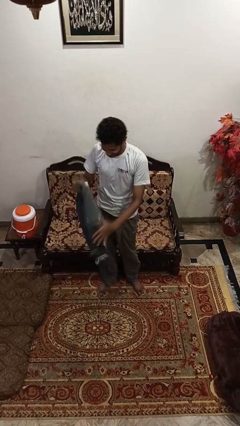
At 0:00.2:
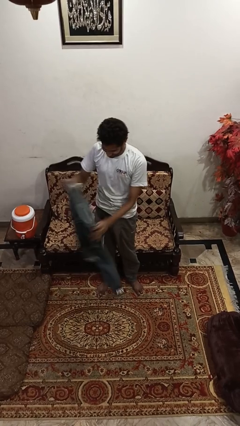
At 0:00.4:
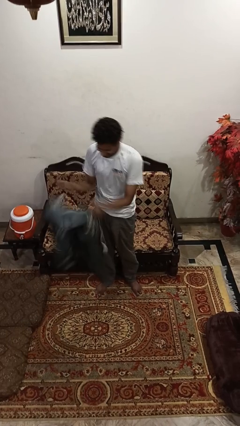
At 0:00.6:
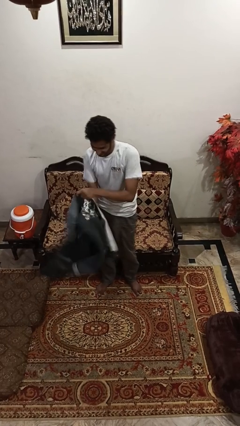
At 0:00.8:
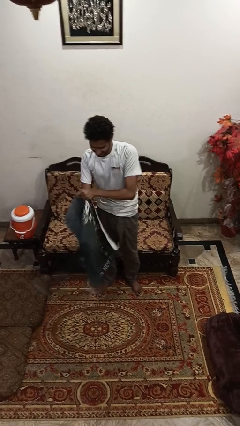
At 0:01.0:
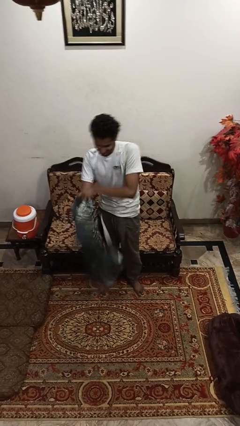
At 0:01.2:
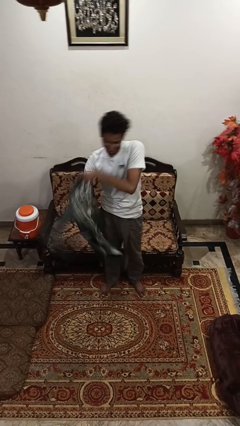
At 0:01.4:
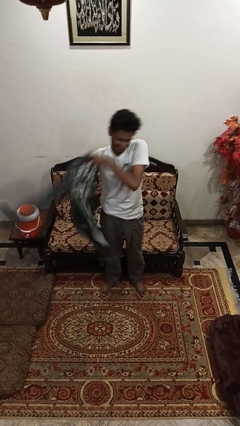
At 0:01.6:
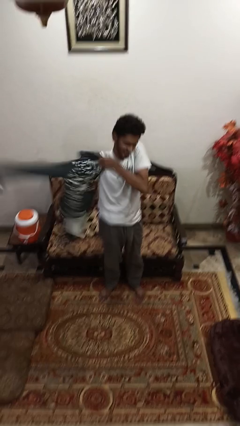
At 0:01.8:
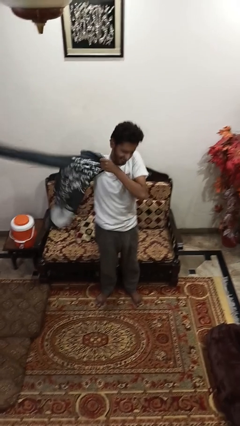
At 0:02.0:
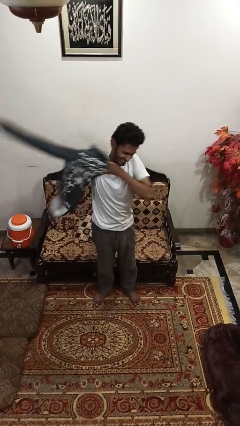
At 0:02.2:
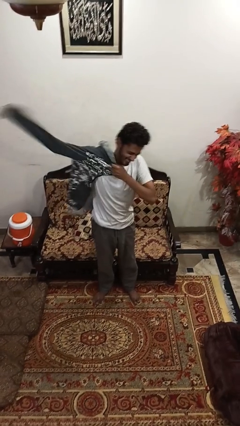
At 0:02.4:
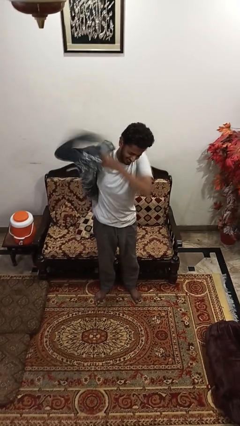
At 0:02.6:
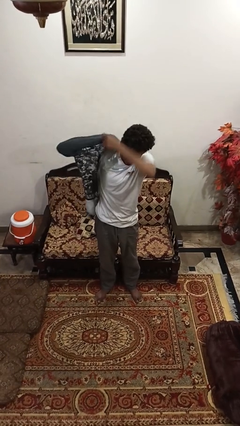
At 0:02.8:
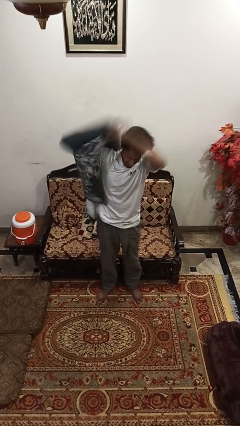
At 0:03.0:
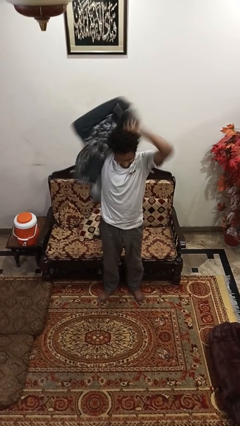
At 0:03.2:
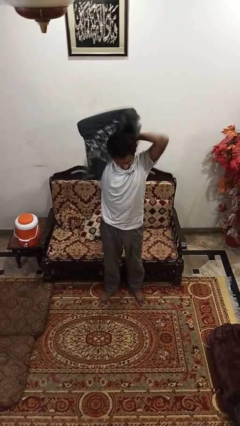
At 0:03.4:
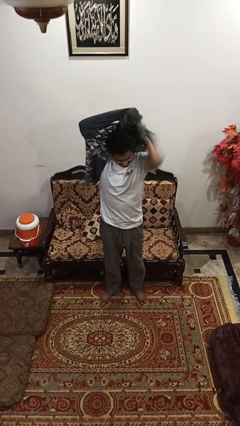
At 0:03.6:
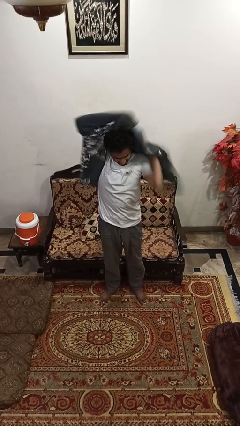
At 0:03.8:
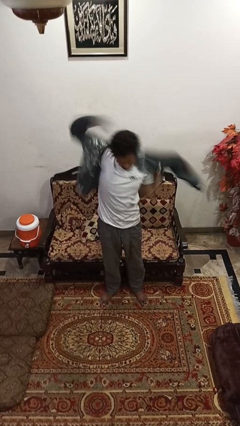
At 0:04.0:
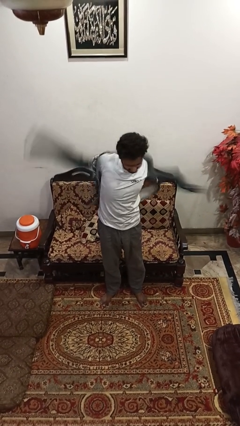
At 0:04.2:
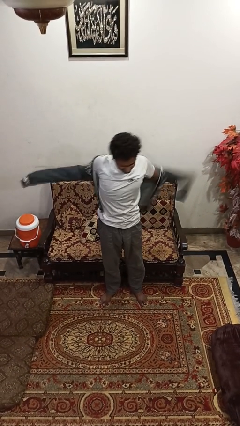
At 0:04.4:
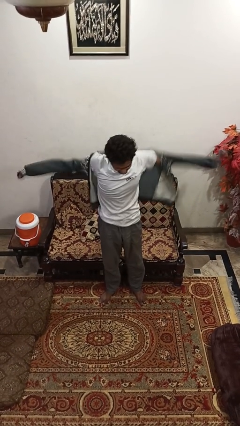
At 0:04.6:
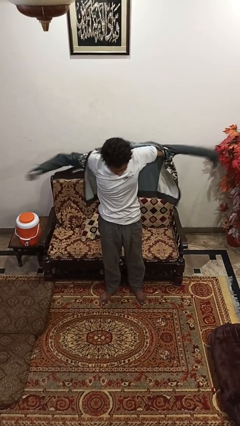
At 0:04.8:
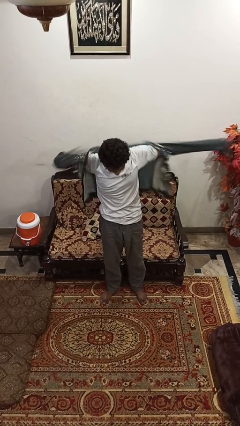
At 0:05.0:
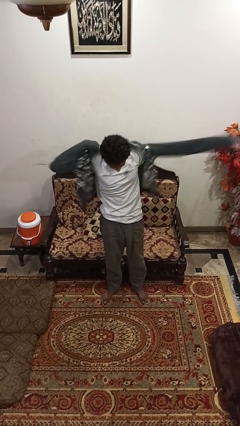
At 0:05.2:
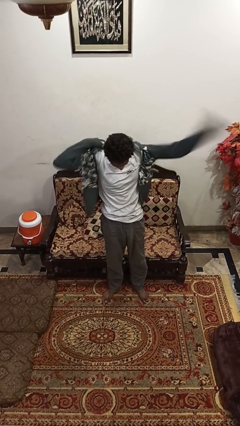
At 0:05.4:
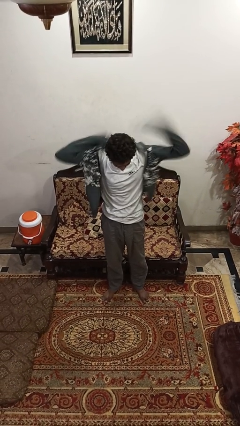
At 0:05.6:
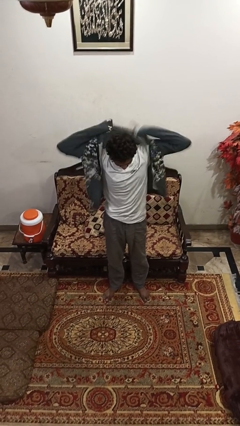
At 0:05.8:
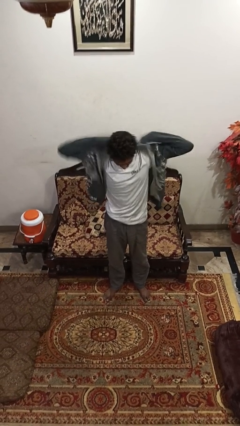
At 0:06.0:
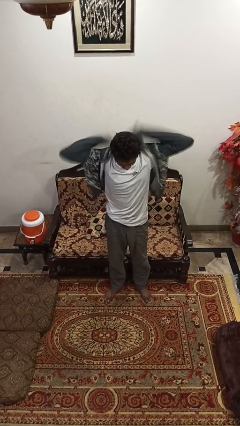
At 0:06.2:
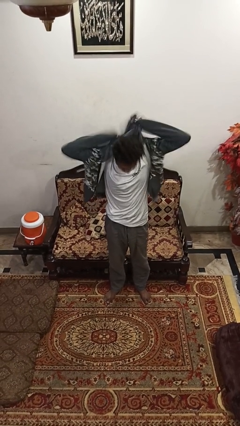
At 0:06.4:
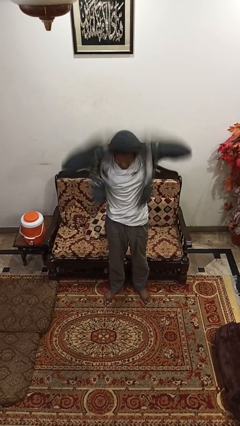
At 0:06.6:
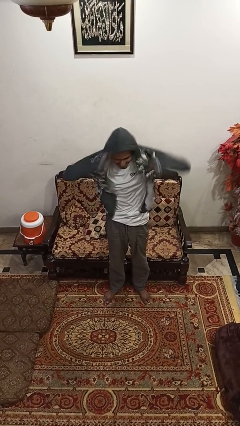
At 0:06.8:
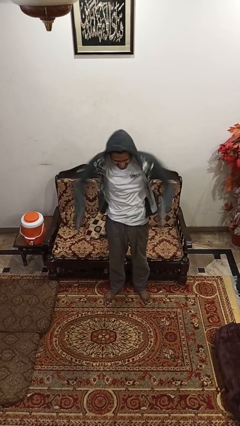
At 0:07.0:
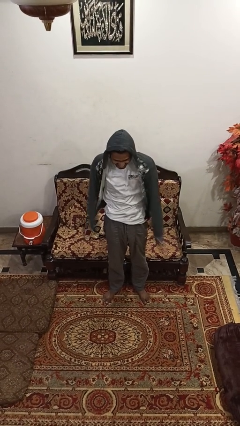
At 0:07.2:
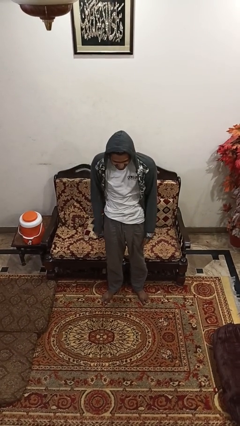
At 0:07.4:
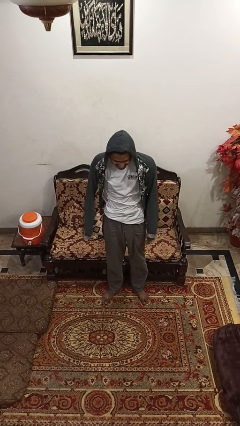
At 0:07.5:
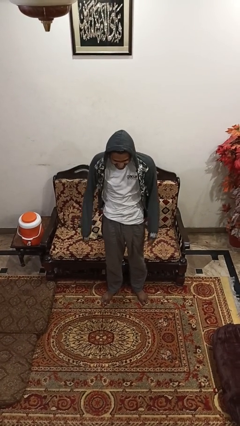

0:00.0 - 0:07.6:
person puts on hoodie

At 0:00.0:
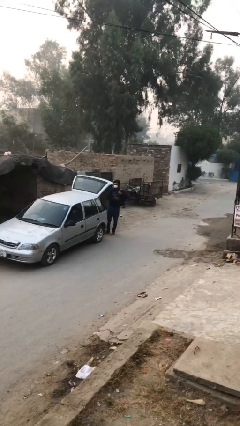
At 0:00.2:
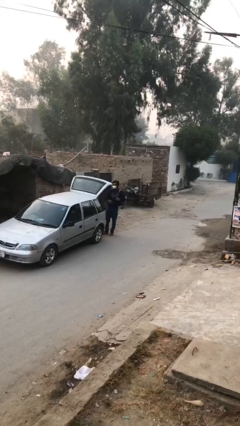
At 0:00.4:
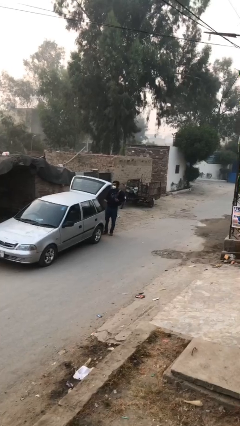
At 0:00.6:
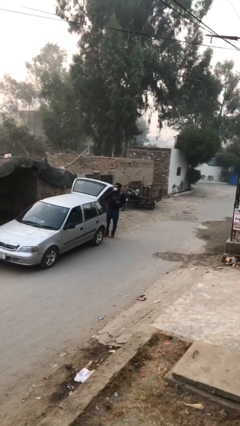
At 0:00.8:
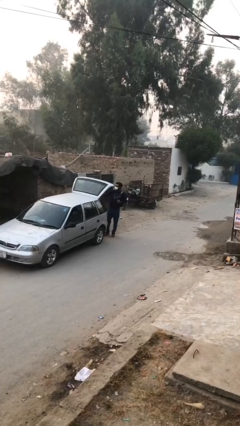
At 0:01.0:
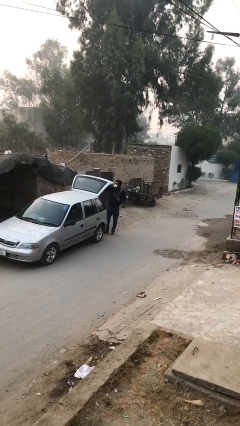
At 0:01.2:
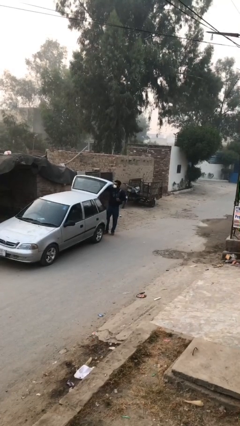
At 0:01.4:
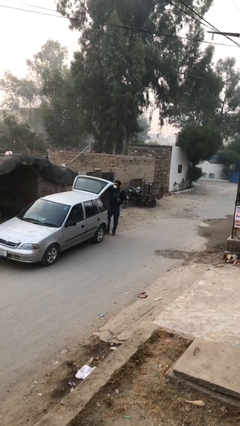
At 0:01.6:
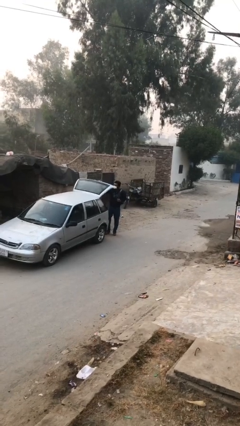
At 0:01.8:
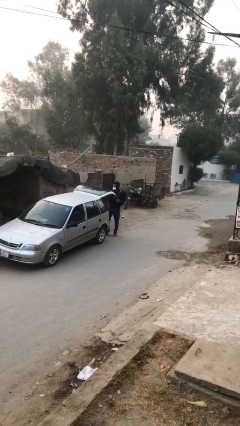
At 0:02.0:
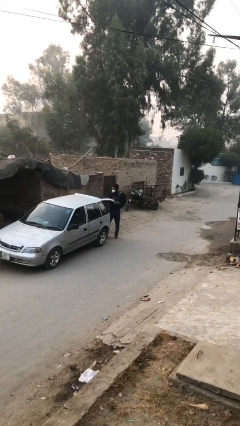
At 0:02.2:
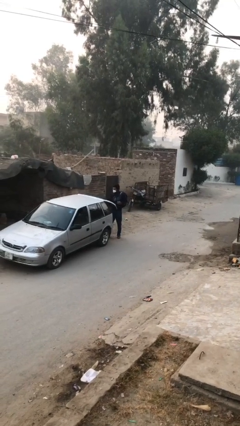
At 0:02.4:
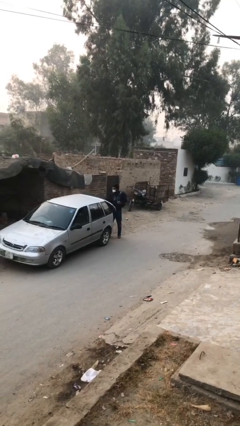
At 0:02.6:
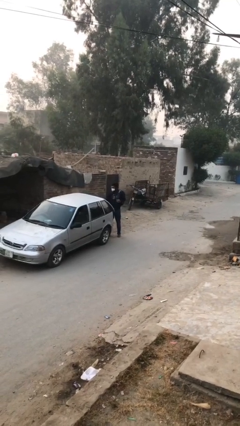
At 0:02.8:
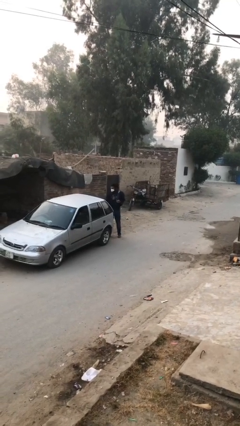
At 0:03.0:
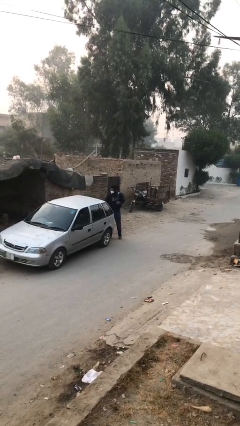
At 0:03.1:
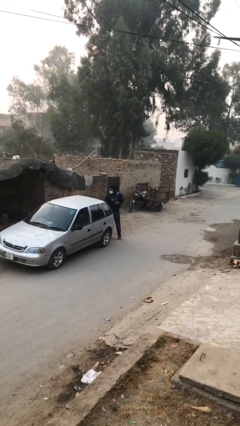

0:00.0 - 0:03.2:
person closes car trunk

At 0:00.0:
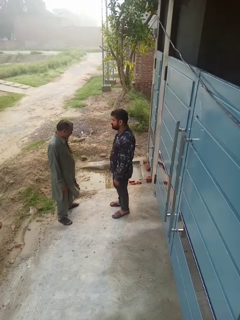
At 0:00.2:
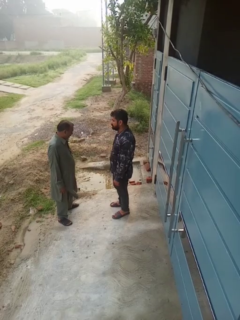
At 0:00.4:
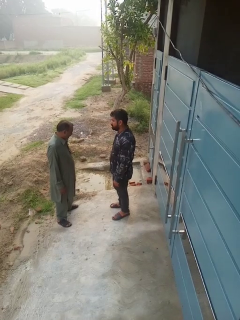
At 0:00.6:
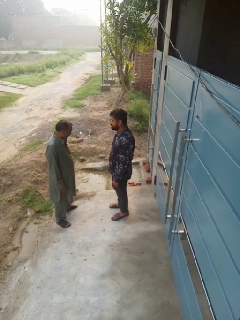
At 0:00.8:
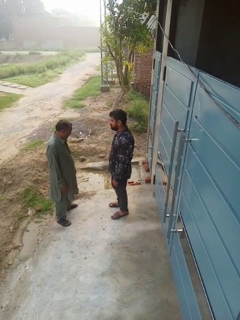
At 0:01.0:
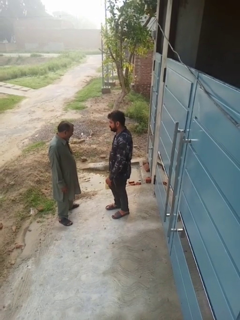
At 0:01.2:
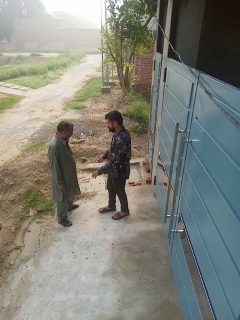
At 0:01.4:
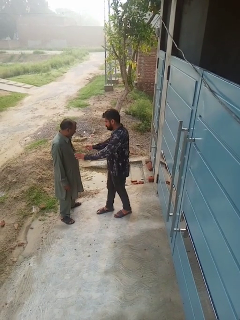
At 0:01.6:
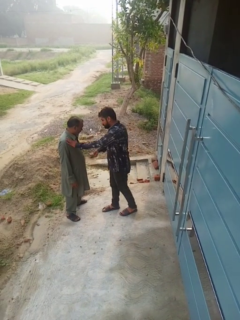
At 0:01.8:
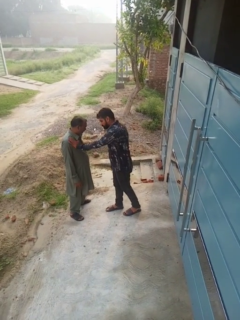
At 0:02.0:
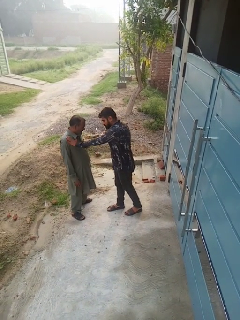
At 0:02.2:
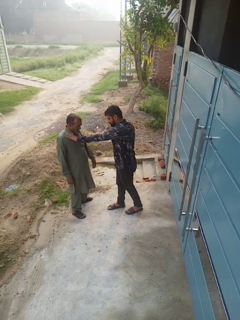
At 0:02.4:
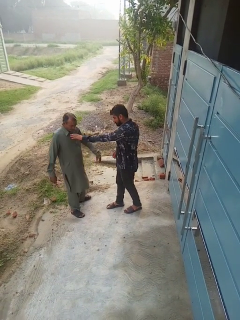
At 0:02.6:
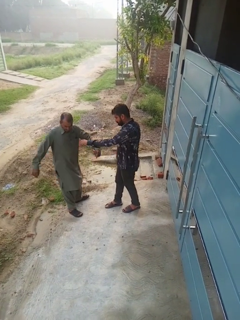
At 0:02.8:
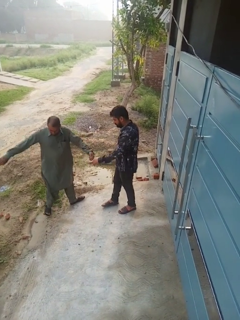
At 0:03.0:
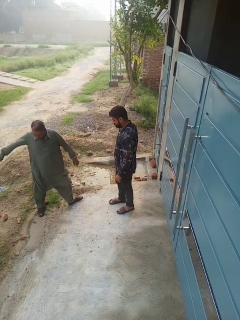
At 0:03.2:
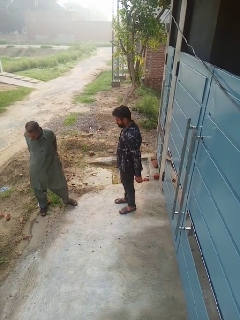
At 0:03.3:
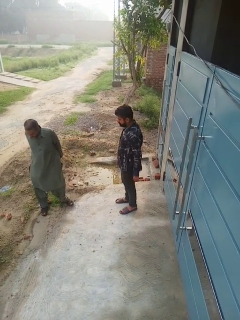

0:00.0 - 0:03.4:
person shoves person

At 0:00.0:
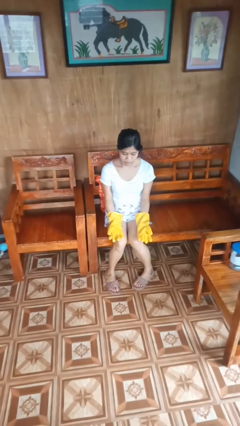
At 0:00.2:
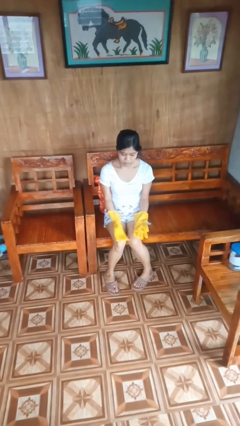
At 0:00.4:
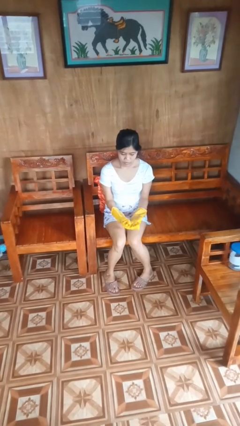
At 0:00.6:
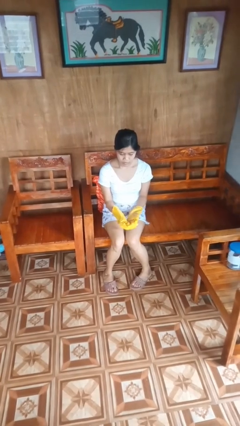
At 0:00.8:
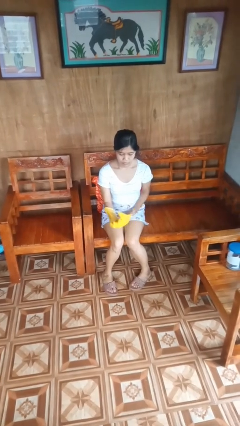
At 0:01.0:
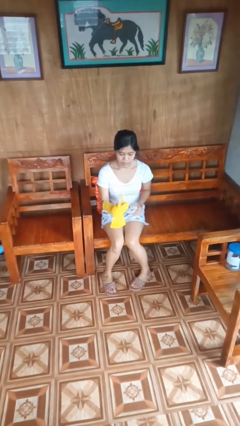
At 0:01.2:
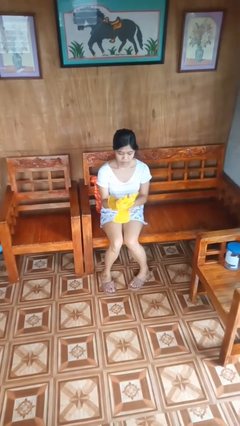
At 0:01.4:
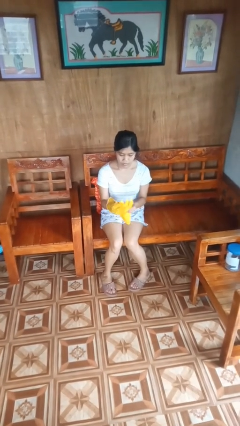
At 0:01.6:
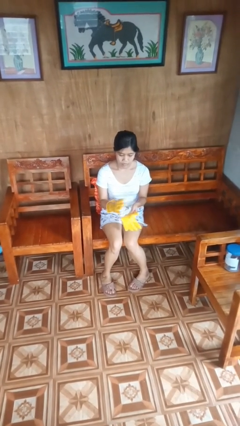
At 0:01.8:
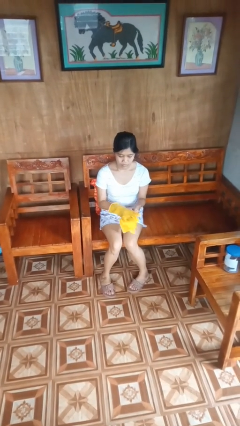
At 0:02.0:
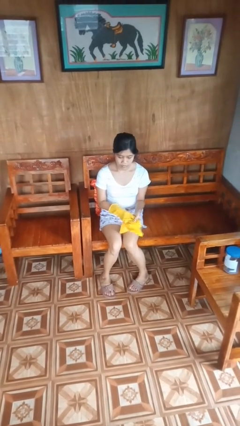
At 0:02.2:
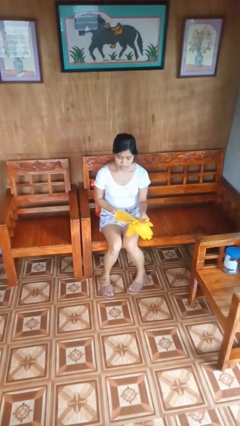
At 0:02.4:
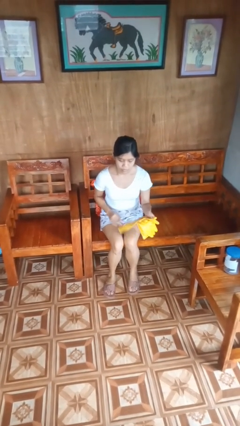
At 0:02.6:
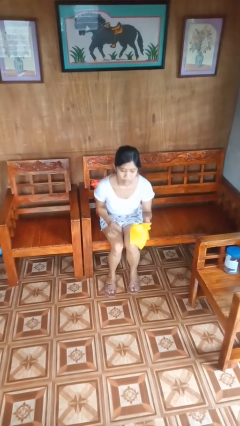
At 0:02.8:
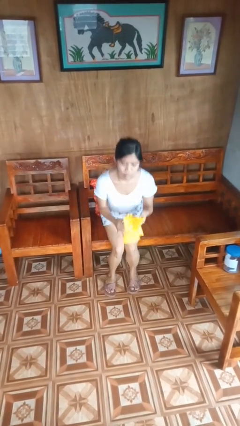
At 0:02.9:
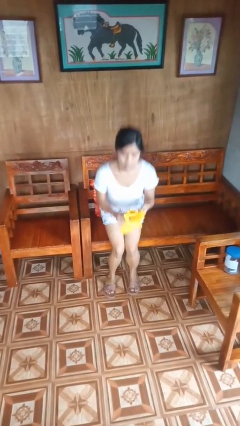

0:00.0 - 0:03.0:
person takes off gloves

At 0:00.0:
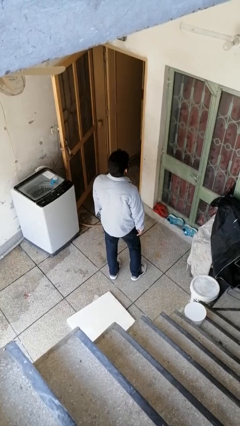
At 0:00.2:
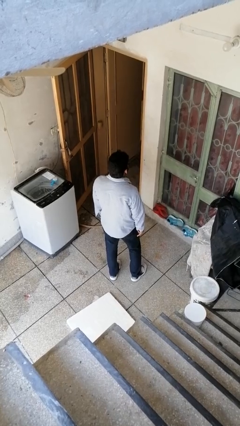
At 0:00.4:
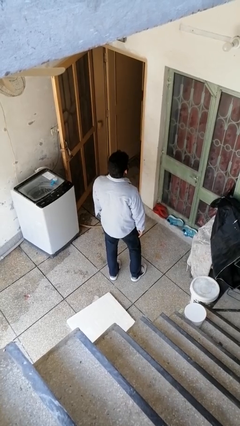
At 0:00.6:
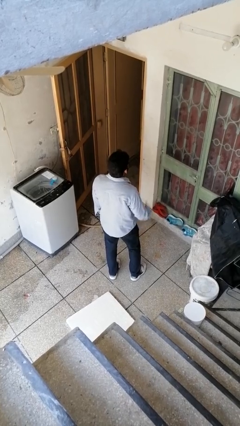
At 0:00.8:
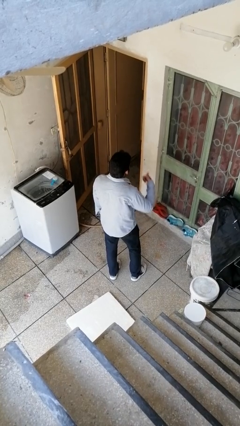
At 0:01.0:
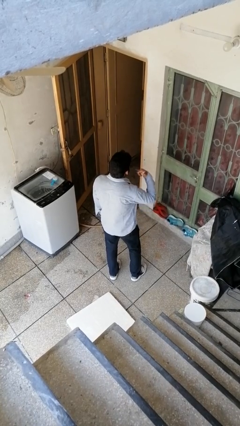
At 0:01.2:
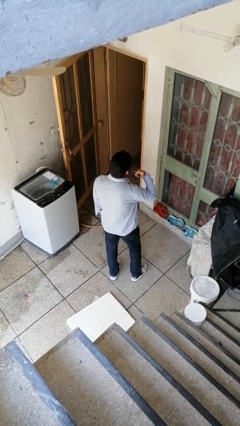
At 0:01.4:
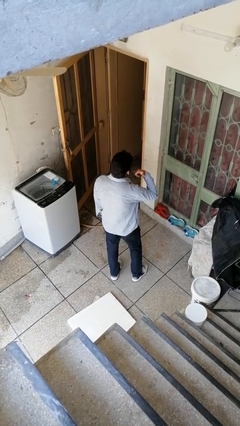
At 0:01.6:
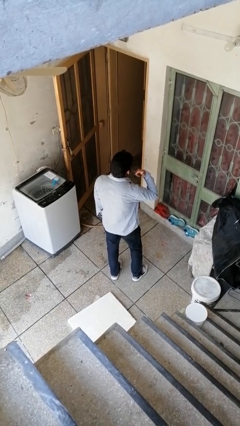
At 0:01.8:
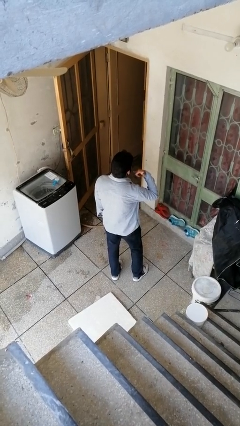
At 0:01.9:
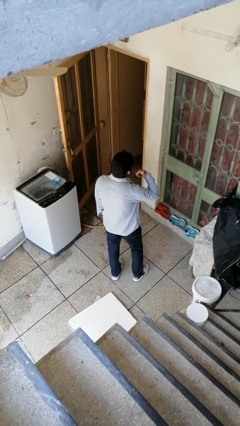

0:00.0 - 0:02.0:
person gestures call me
